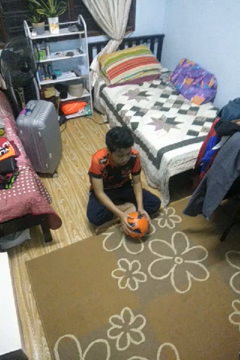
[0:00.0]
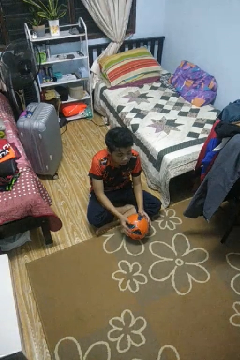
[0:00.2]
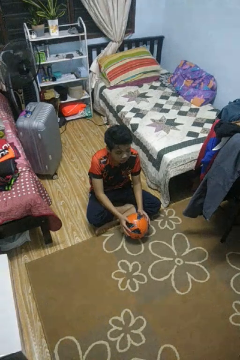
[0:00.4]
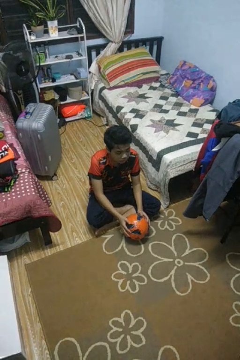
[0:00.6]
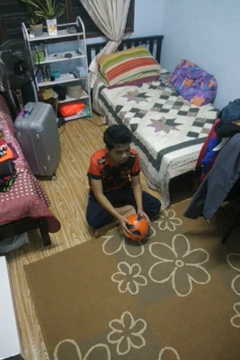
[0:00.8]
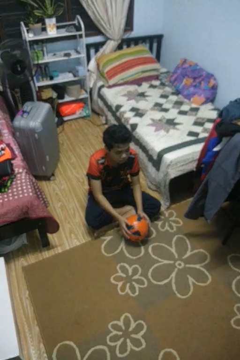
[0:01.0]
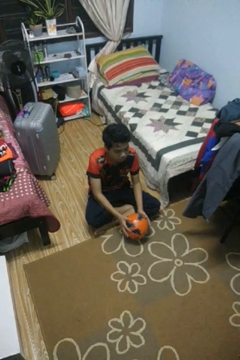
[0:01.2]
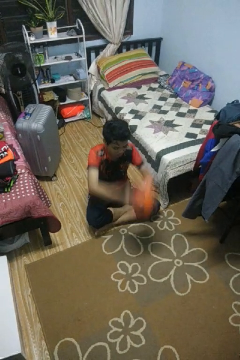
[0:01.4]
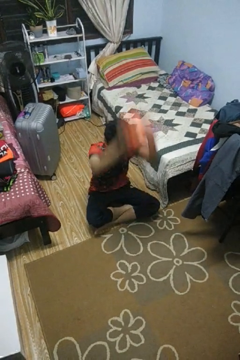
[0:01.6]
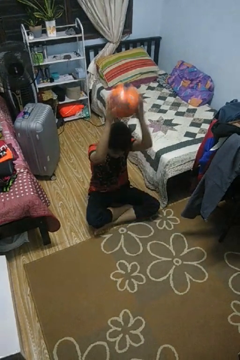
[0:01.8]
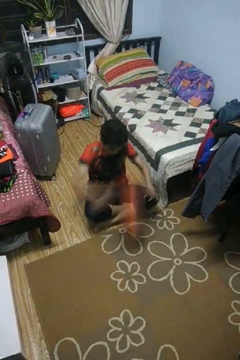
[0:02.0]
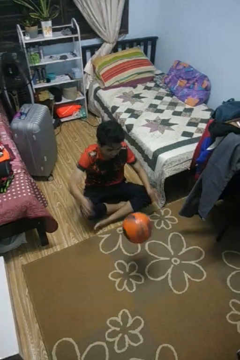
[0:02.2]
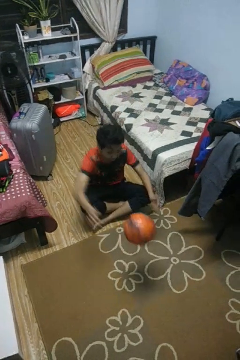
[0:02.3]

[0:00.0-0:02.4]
person bounces ball on floor

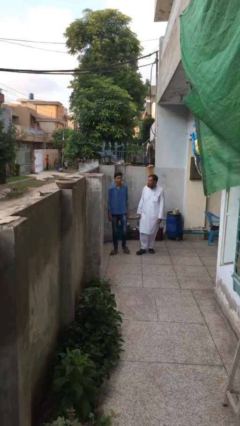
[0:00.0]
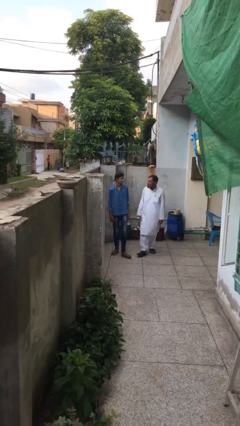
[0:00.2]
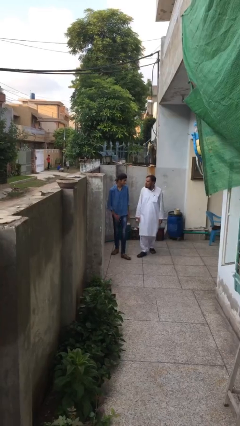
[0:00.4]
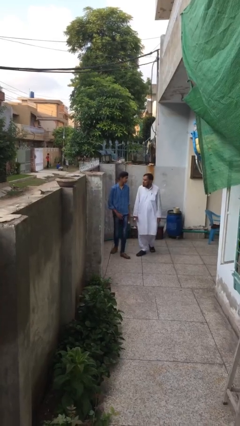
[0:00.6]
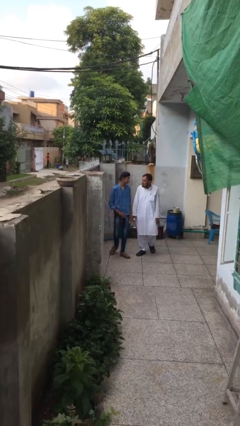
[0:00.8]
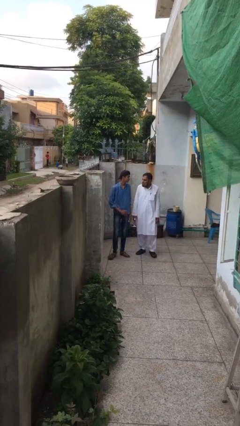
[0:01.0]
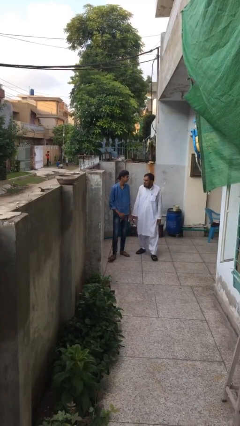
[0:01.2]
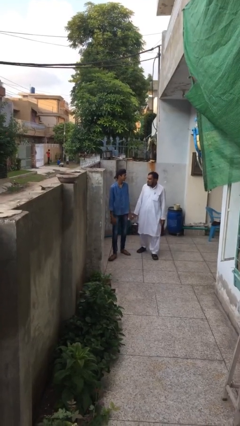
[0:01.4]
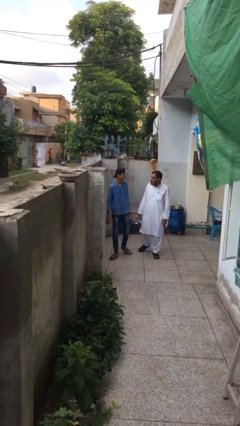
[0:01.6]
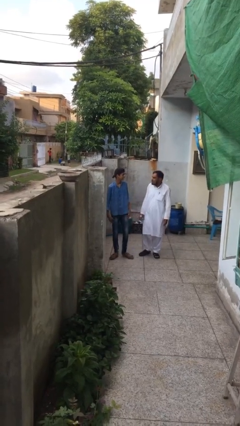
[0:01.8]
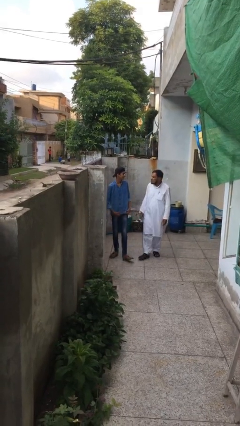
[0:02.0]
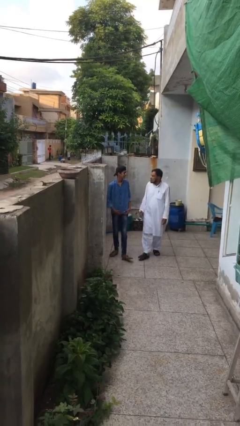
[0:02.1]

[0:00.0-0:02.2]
person talks to person

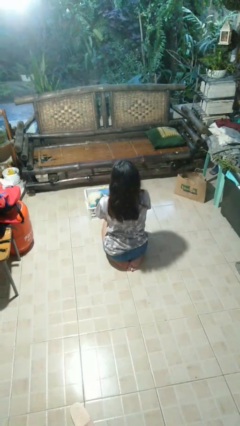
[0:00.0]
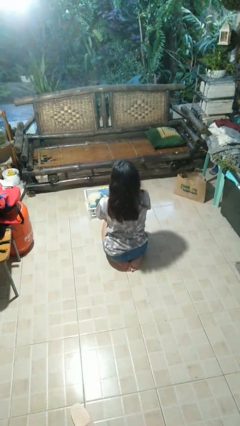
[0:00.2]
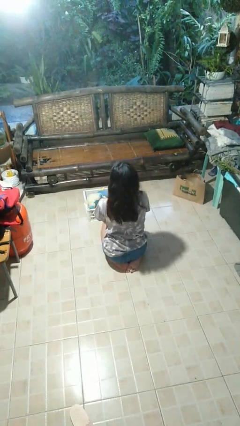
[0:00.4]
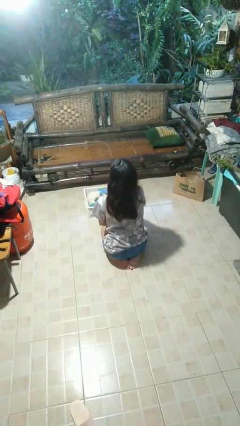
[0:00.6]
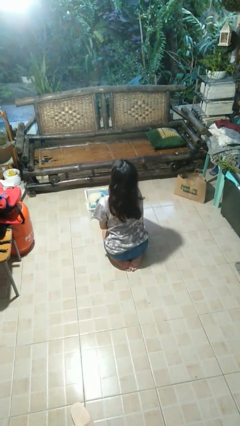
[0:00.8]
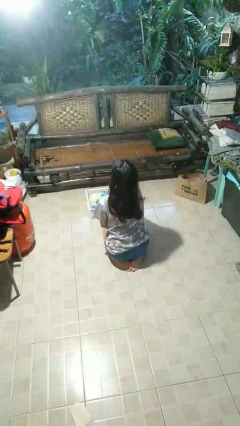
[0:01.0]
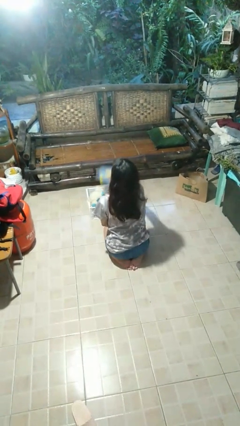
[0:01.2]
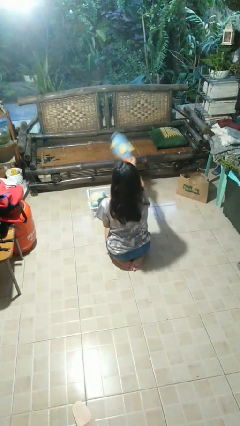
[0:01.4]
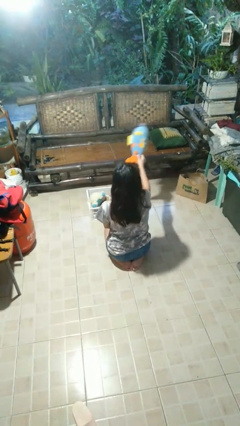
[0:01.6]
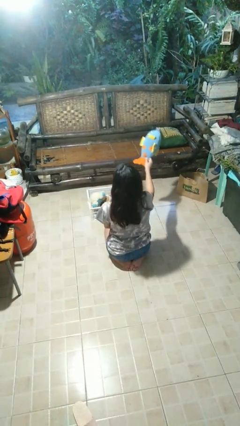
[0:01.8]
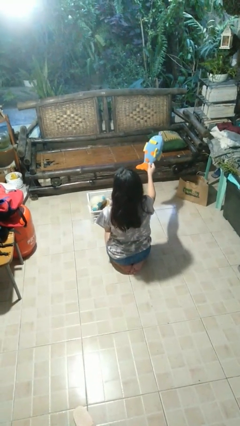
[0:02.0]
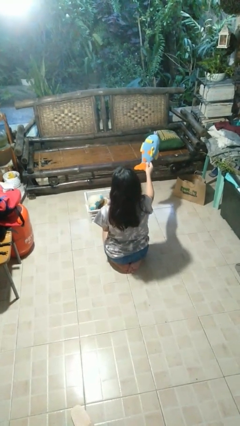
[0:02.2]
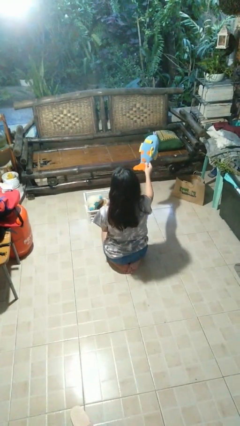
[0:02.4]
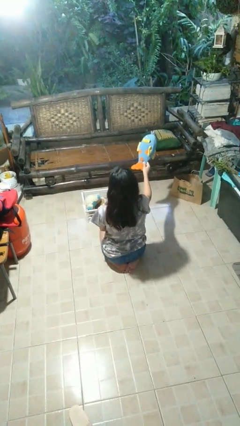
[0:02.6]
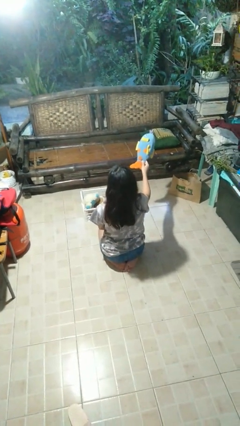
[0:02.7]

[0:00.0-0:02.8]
person takes object from basket

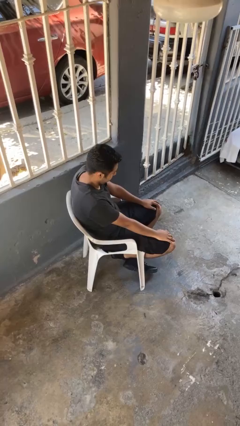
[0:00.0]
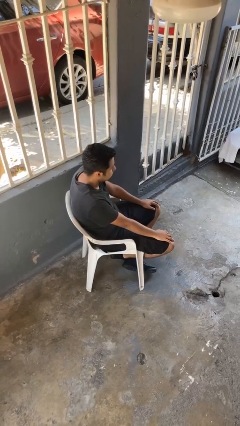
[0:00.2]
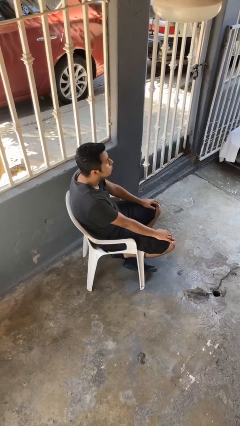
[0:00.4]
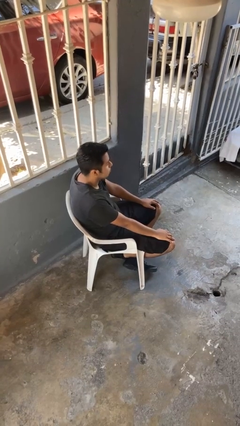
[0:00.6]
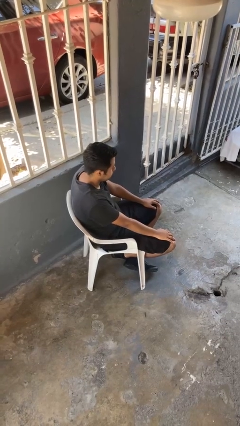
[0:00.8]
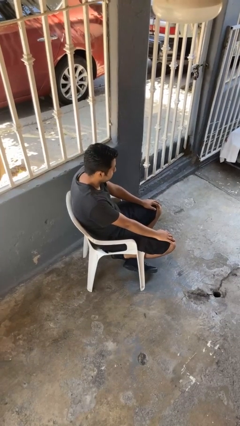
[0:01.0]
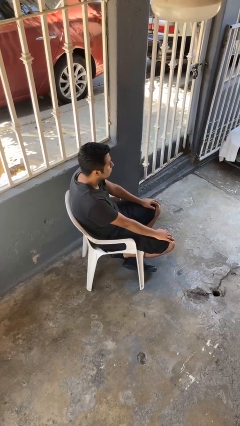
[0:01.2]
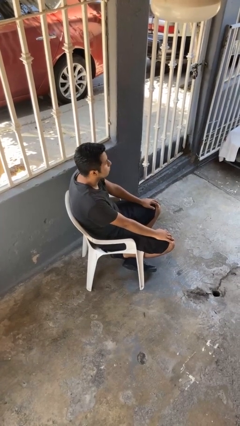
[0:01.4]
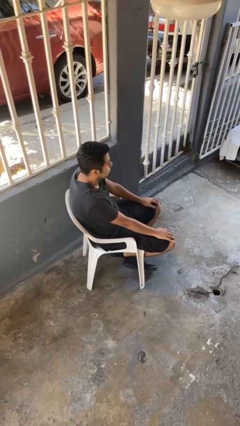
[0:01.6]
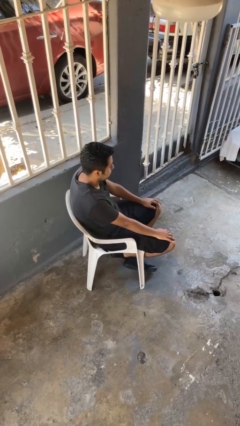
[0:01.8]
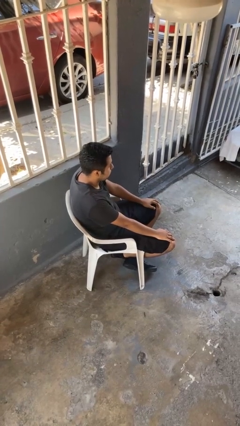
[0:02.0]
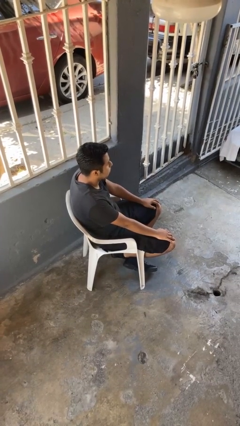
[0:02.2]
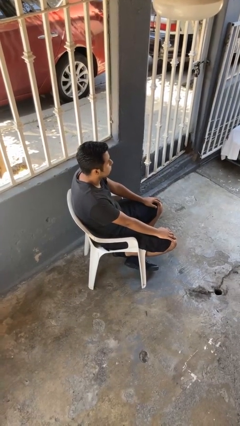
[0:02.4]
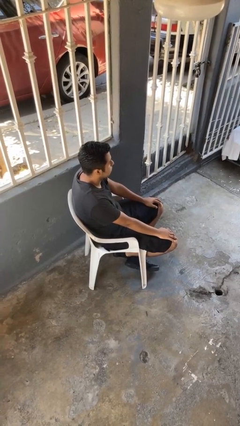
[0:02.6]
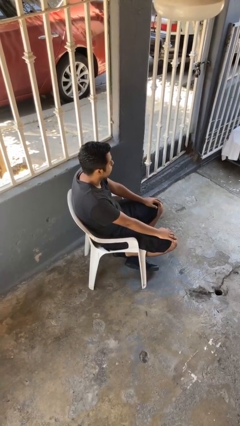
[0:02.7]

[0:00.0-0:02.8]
person nods head

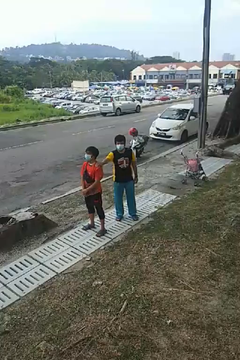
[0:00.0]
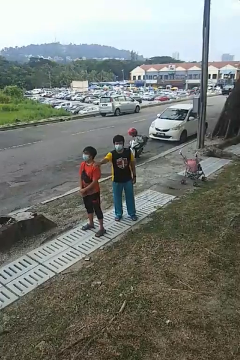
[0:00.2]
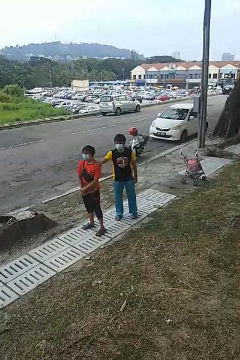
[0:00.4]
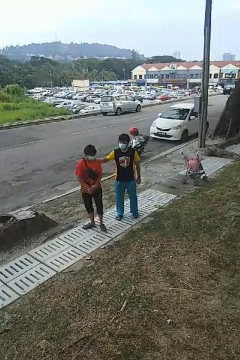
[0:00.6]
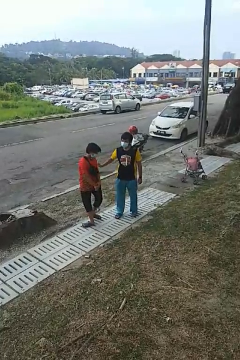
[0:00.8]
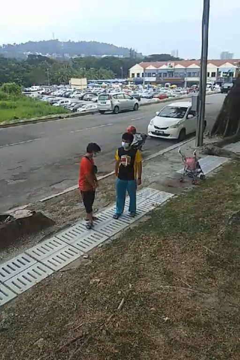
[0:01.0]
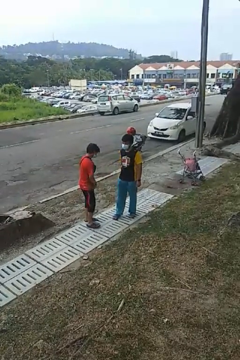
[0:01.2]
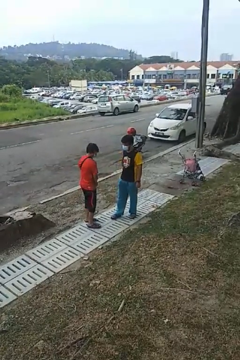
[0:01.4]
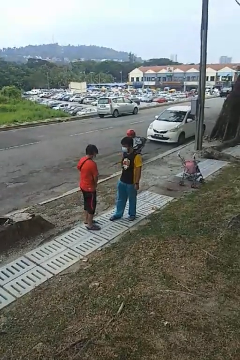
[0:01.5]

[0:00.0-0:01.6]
person spins person around

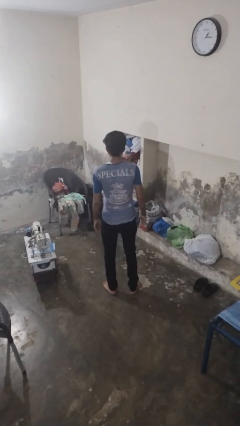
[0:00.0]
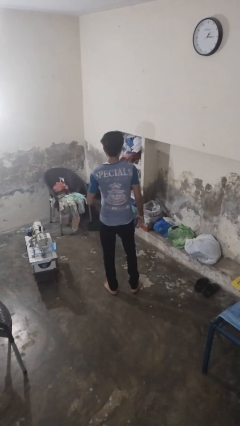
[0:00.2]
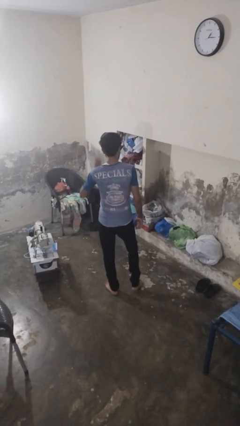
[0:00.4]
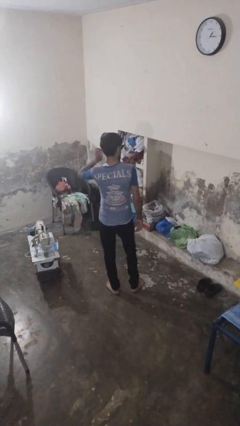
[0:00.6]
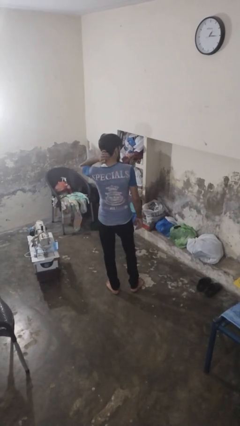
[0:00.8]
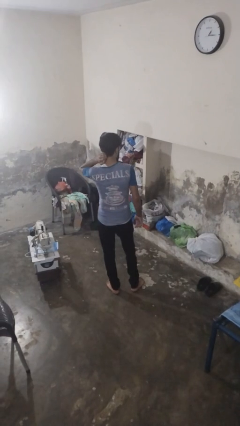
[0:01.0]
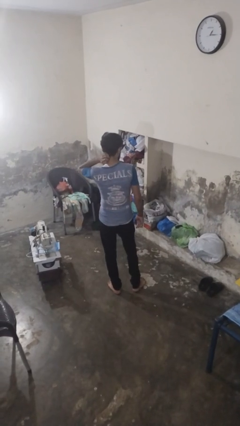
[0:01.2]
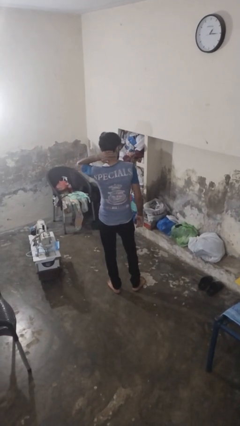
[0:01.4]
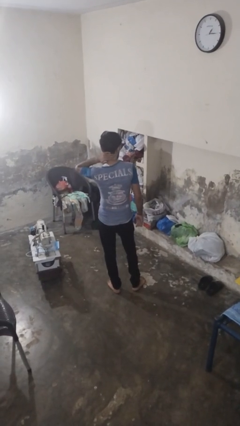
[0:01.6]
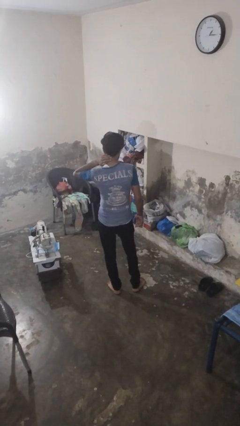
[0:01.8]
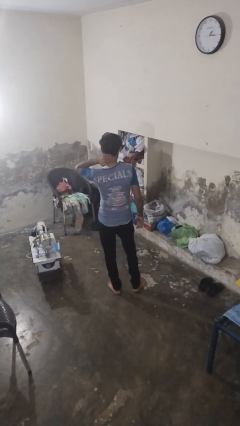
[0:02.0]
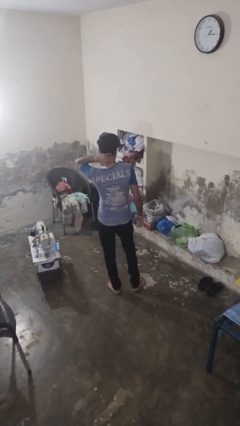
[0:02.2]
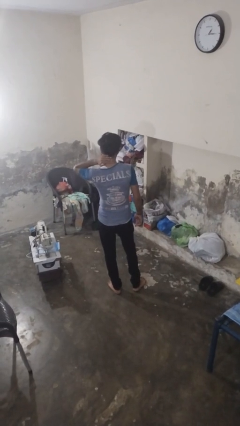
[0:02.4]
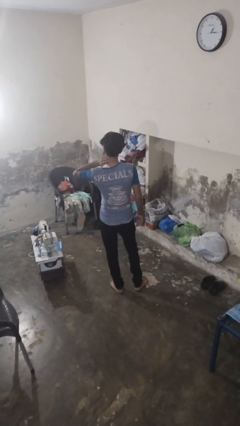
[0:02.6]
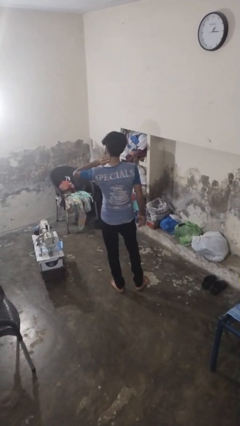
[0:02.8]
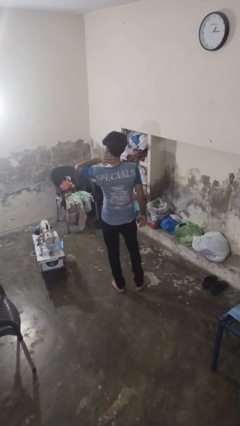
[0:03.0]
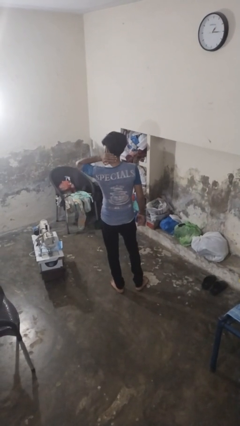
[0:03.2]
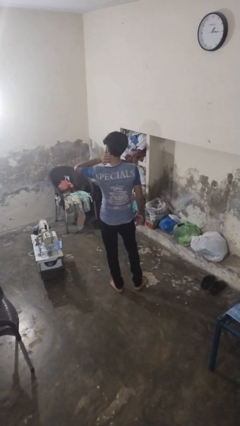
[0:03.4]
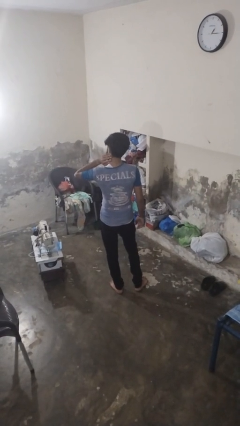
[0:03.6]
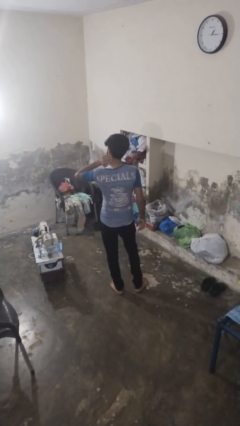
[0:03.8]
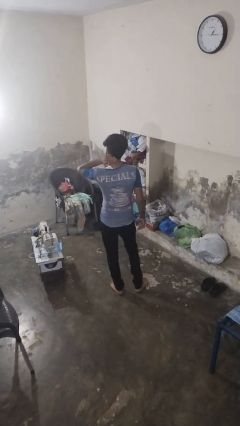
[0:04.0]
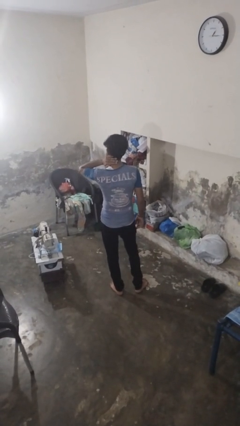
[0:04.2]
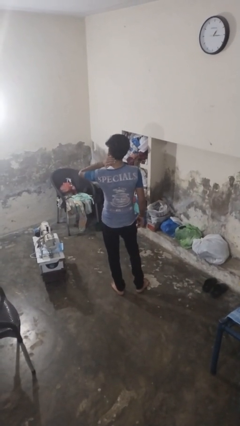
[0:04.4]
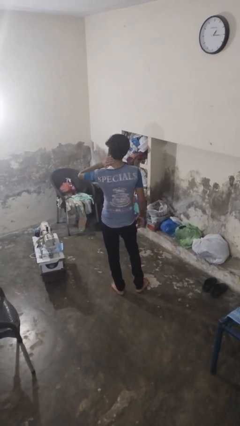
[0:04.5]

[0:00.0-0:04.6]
person rubs neck

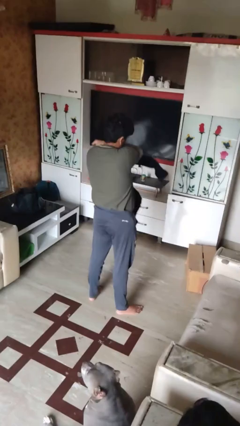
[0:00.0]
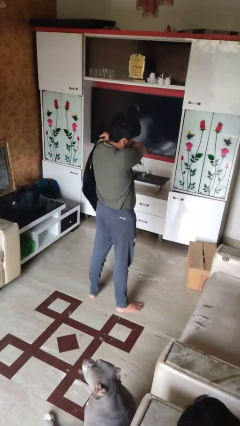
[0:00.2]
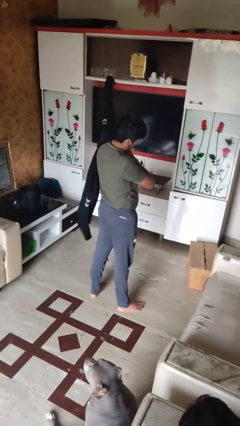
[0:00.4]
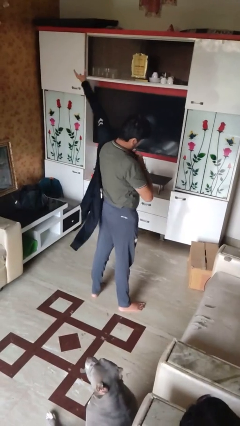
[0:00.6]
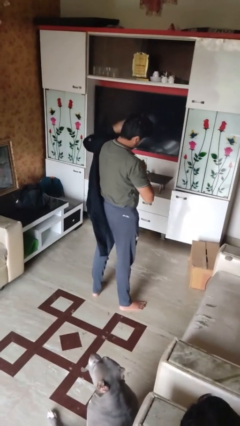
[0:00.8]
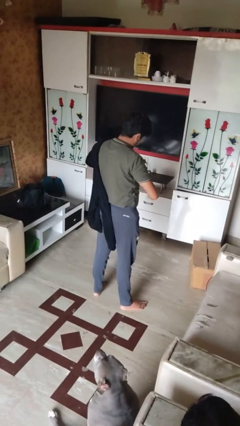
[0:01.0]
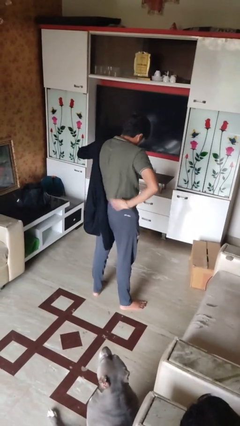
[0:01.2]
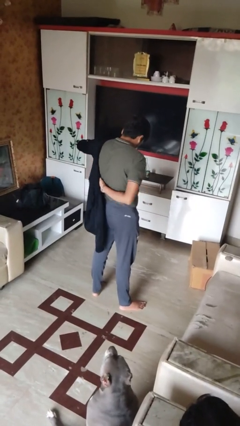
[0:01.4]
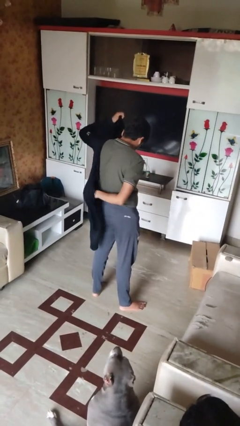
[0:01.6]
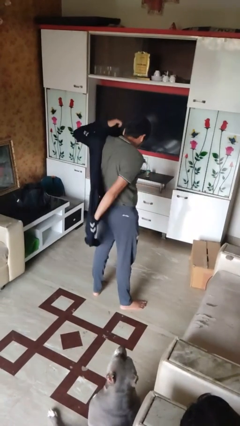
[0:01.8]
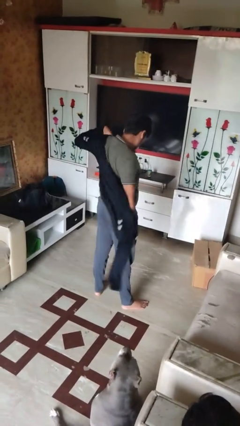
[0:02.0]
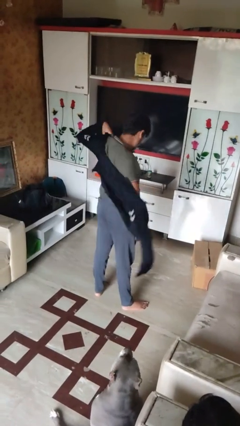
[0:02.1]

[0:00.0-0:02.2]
person puts on jacket
